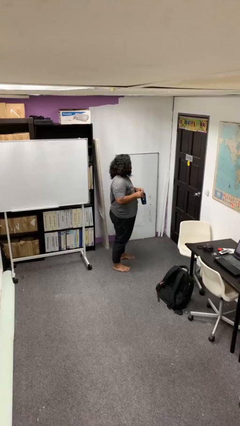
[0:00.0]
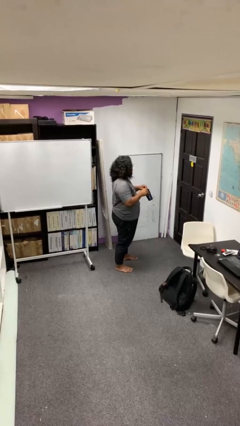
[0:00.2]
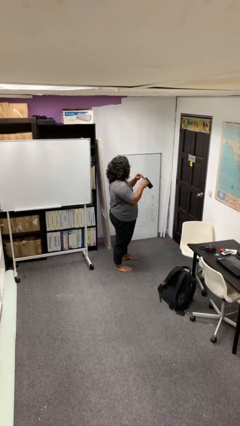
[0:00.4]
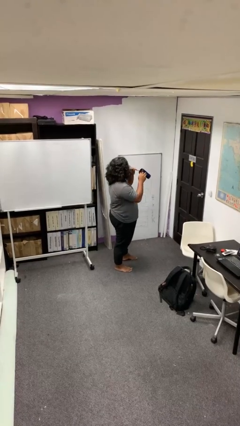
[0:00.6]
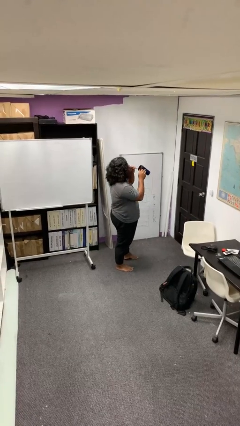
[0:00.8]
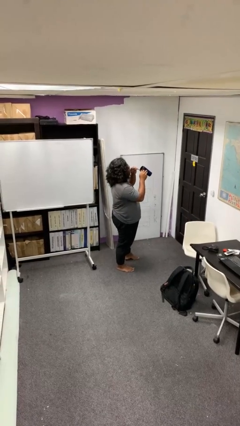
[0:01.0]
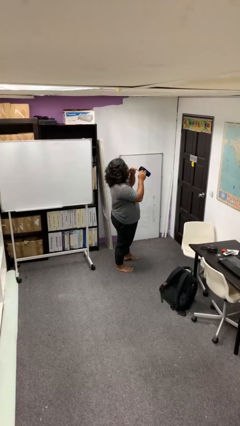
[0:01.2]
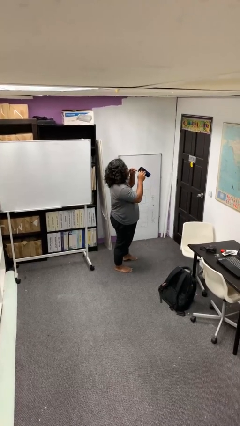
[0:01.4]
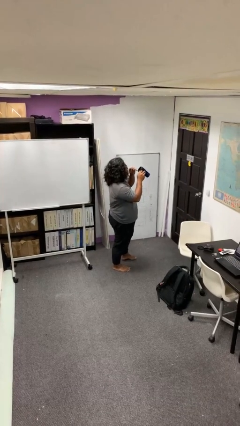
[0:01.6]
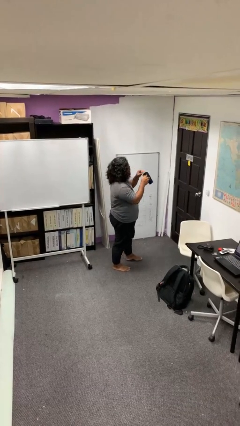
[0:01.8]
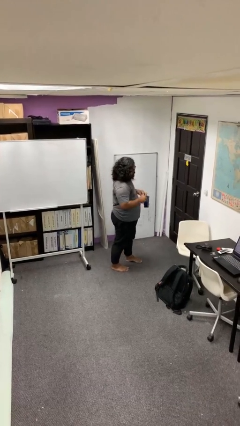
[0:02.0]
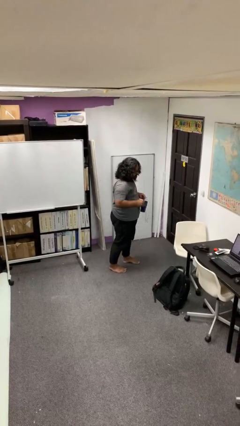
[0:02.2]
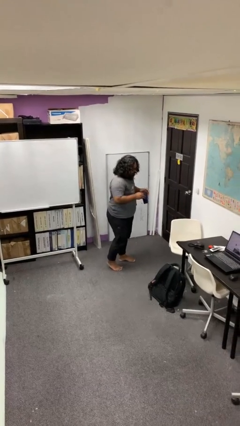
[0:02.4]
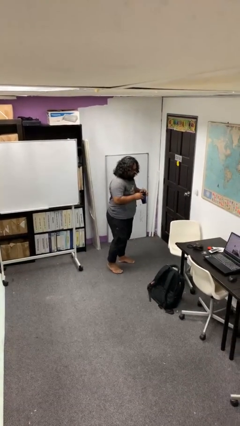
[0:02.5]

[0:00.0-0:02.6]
person drinks from straw

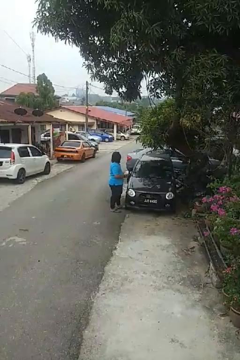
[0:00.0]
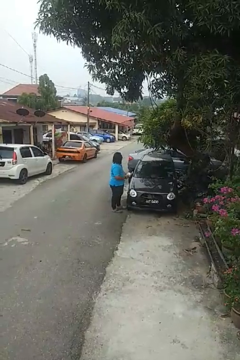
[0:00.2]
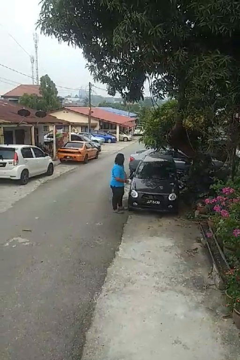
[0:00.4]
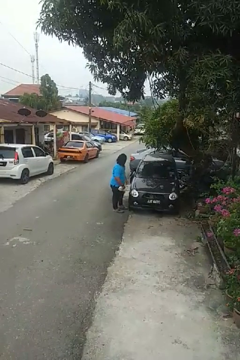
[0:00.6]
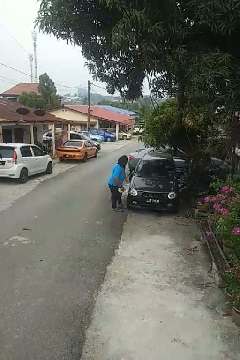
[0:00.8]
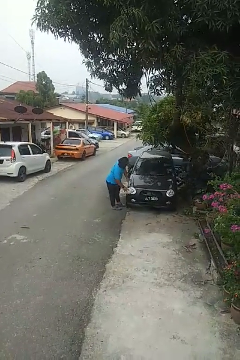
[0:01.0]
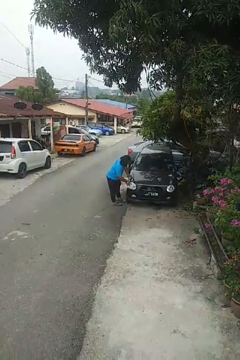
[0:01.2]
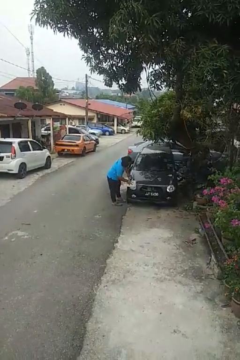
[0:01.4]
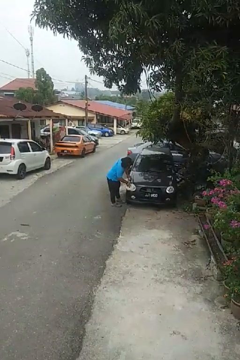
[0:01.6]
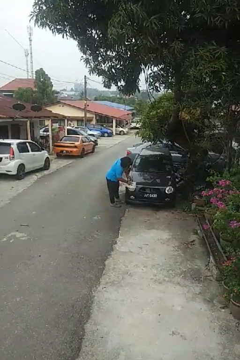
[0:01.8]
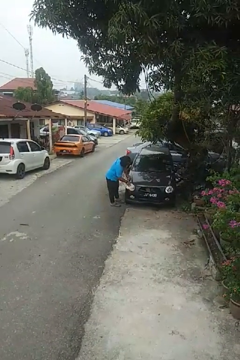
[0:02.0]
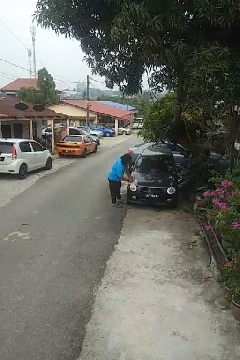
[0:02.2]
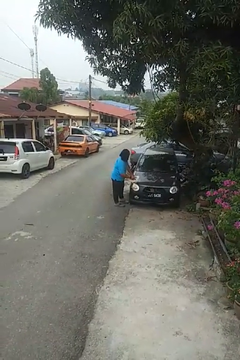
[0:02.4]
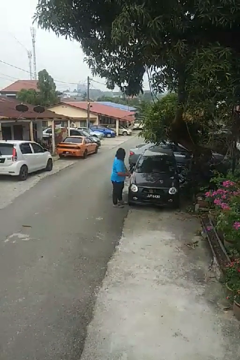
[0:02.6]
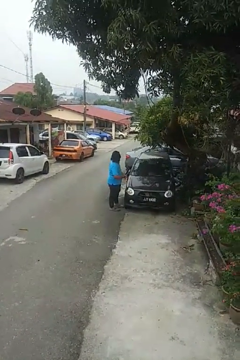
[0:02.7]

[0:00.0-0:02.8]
person polishes car with rag

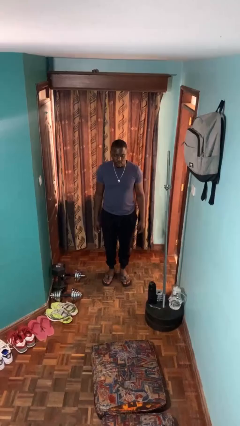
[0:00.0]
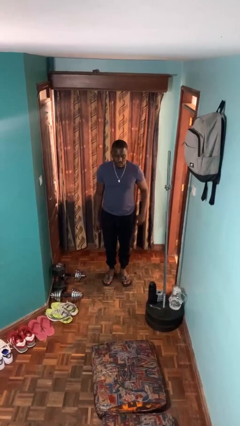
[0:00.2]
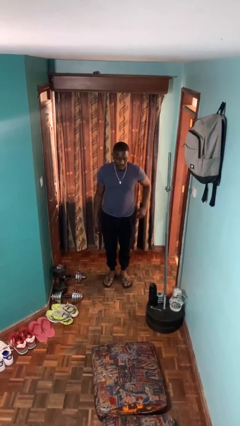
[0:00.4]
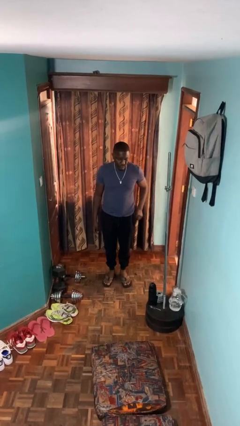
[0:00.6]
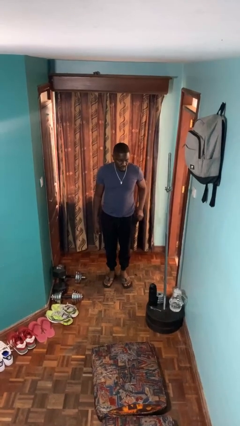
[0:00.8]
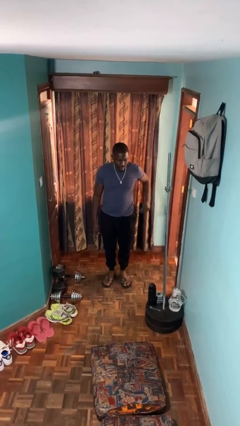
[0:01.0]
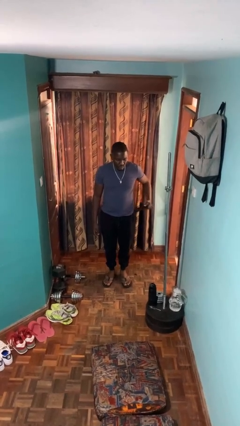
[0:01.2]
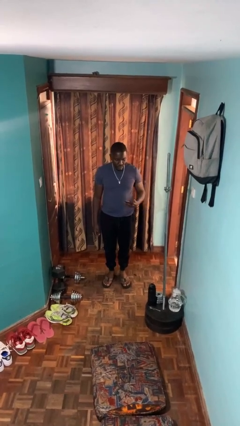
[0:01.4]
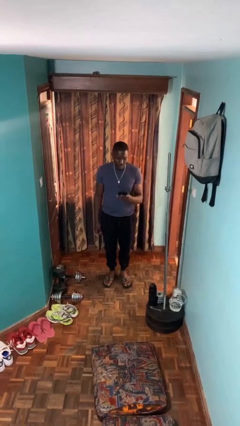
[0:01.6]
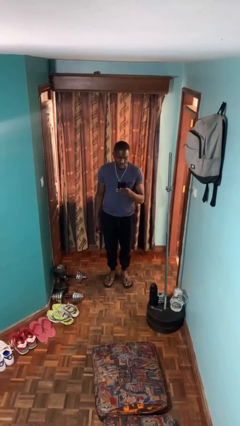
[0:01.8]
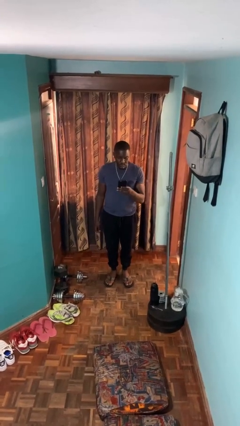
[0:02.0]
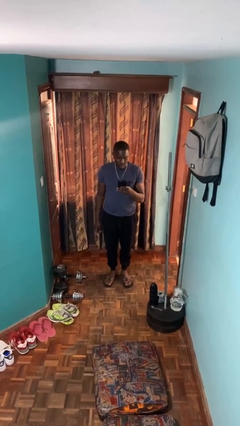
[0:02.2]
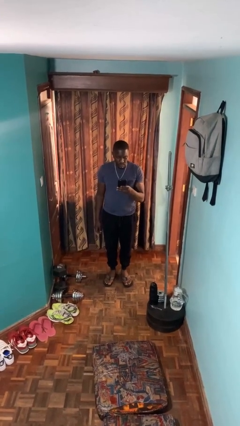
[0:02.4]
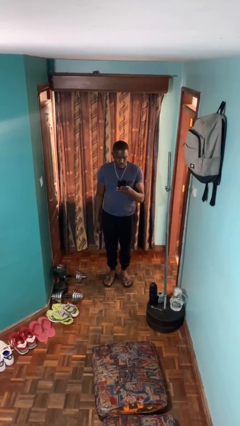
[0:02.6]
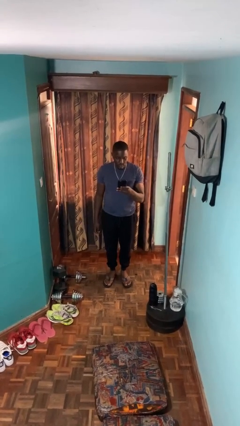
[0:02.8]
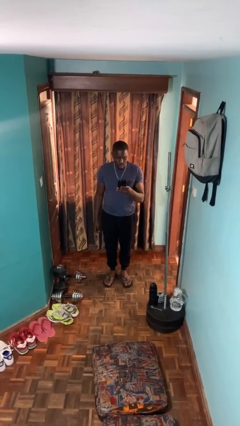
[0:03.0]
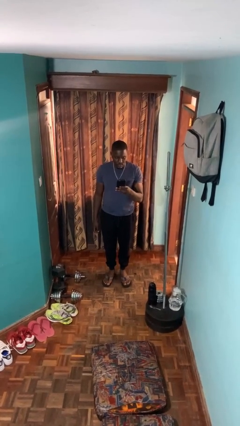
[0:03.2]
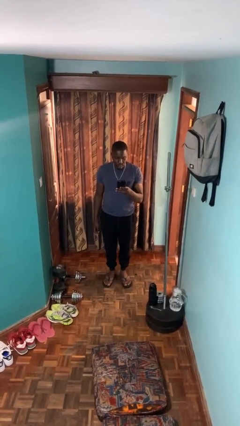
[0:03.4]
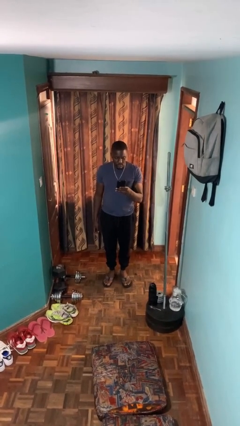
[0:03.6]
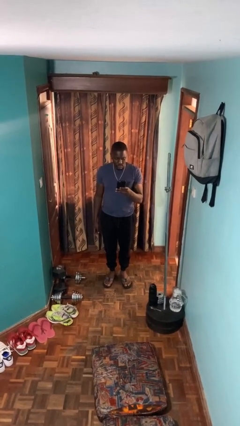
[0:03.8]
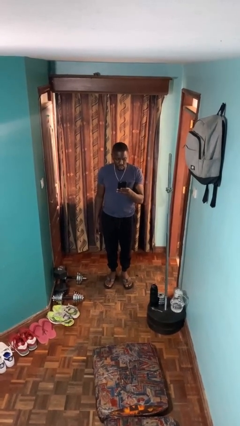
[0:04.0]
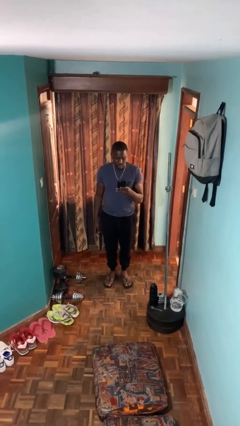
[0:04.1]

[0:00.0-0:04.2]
person takes phone from pocket

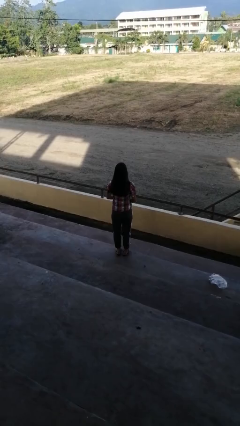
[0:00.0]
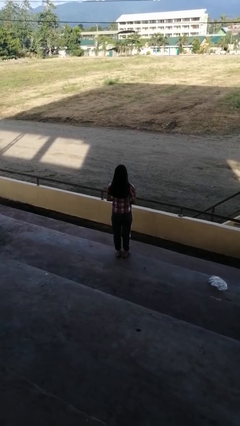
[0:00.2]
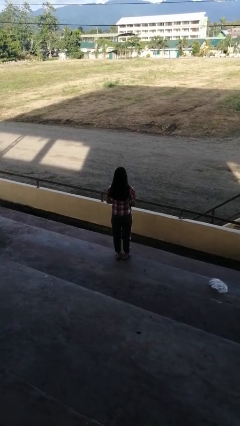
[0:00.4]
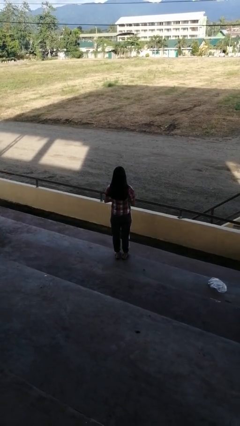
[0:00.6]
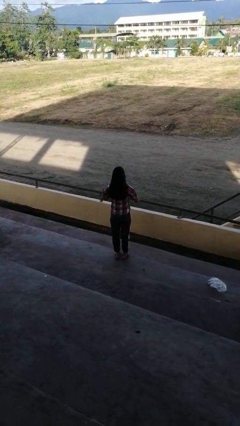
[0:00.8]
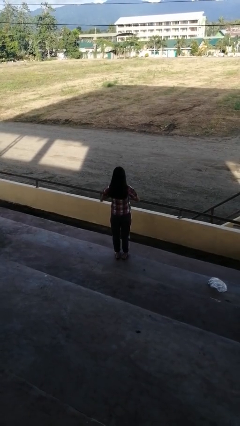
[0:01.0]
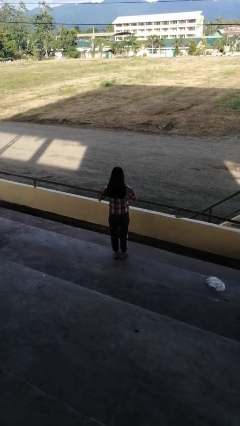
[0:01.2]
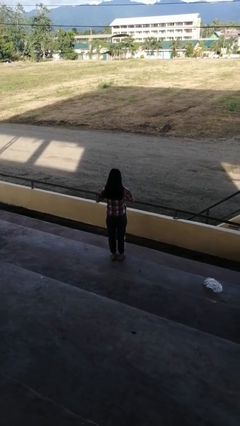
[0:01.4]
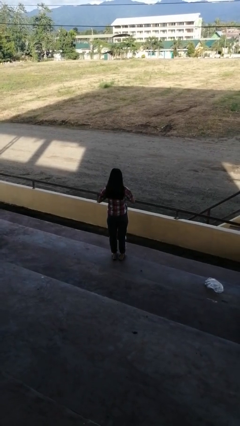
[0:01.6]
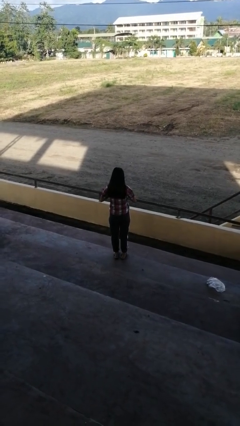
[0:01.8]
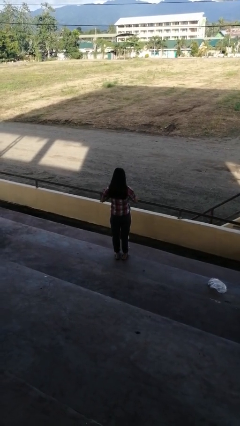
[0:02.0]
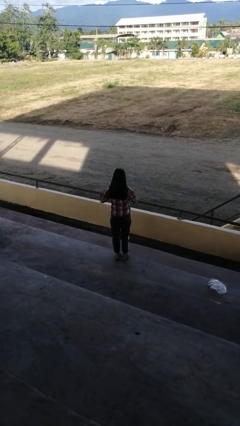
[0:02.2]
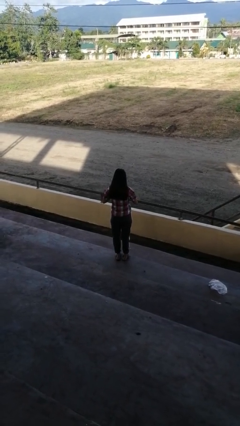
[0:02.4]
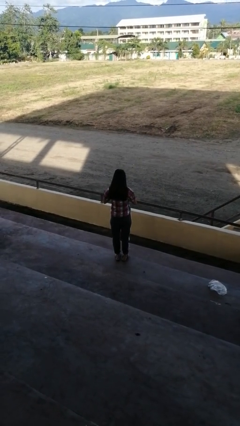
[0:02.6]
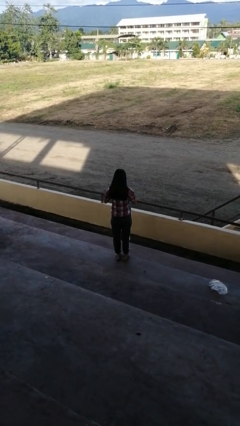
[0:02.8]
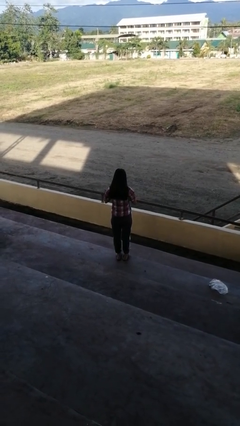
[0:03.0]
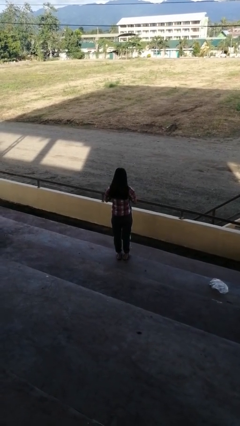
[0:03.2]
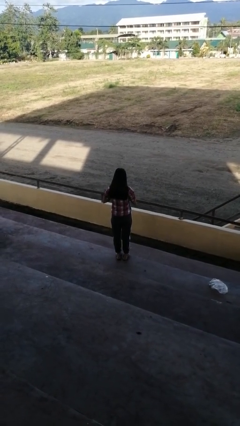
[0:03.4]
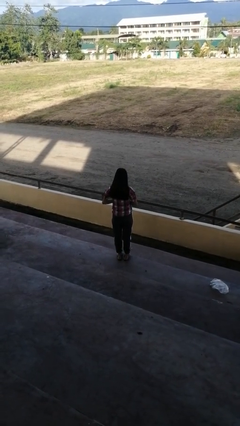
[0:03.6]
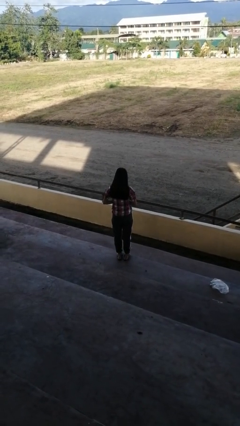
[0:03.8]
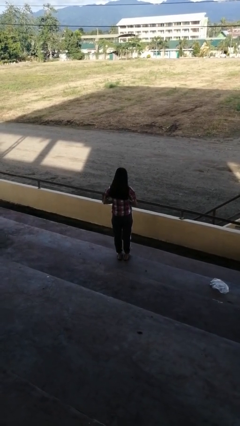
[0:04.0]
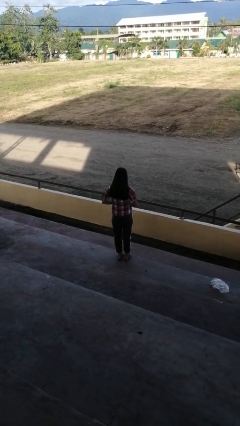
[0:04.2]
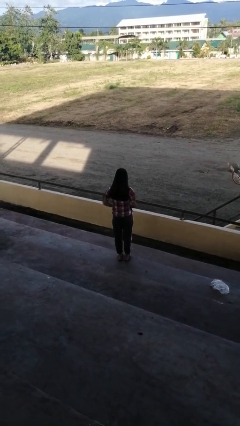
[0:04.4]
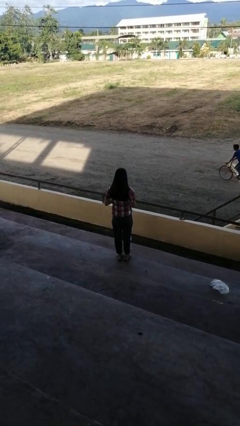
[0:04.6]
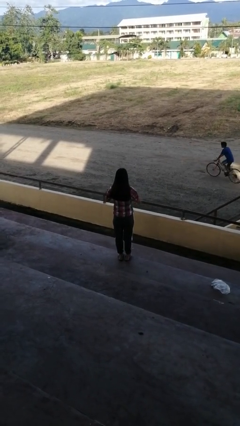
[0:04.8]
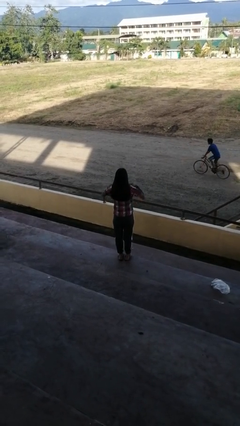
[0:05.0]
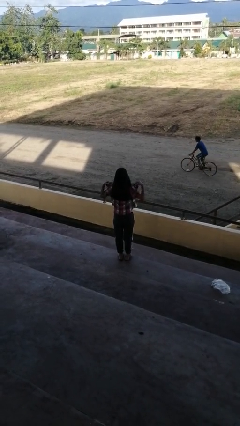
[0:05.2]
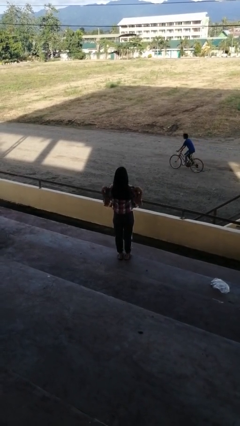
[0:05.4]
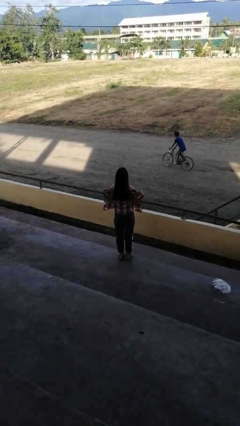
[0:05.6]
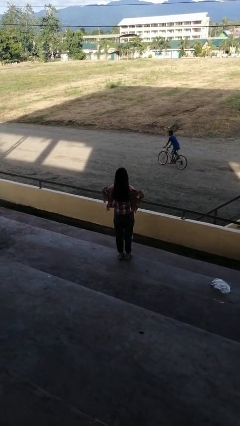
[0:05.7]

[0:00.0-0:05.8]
person unbuttons shirt

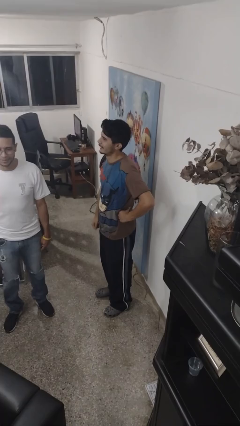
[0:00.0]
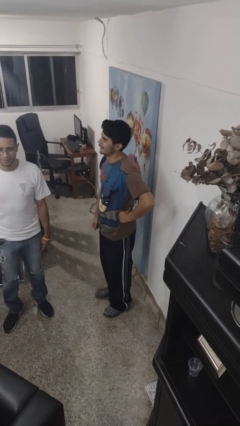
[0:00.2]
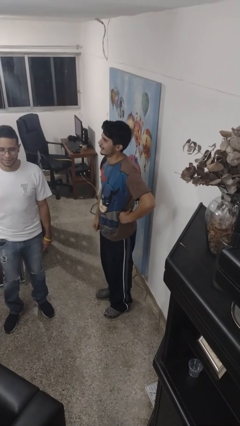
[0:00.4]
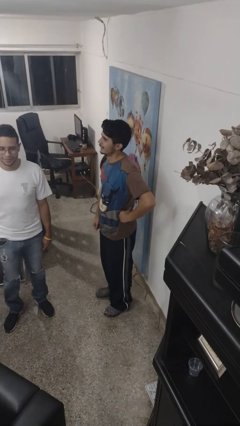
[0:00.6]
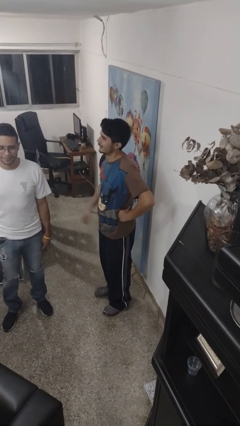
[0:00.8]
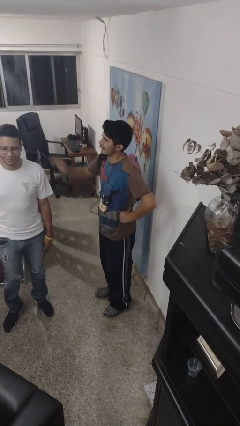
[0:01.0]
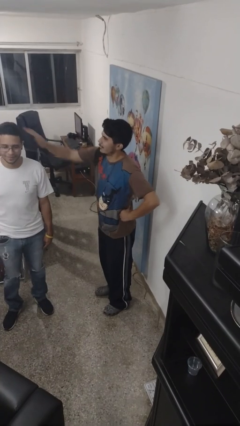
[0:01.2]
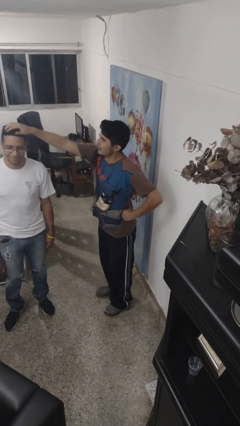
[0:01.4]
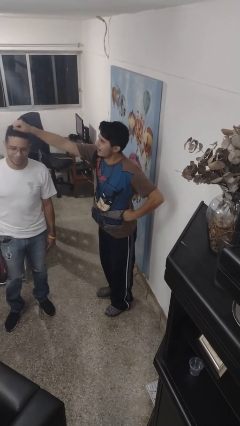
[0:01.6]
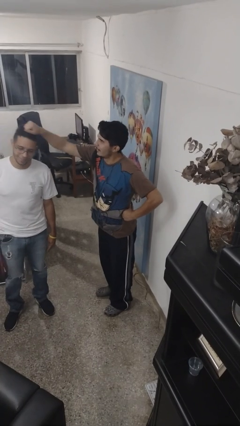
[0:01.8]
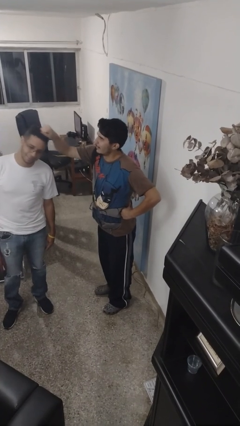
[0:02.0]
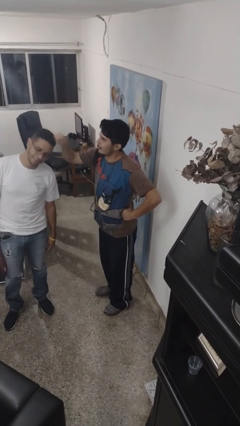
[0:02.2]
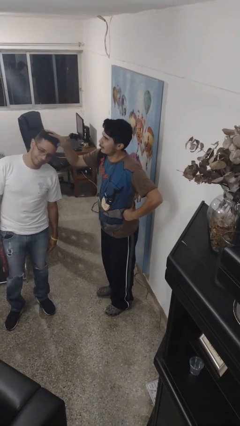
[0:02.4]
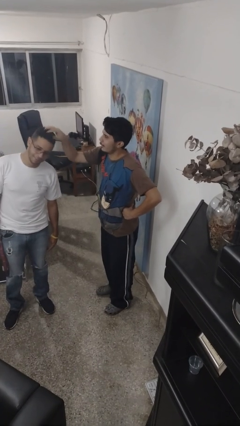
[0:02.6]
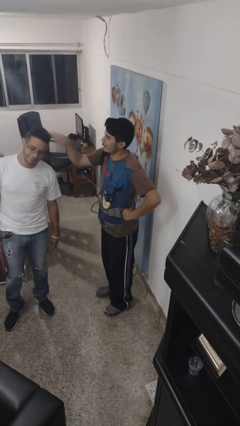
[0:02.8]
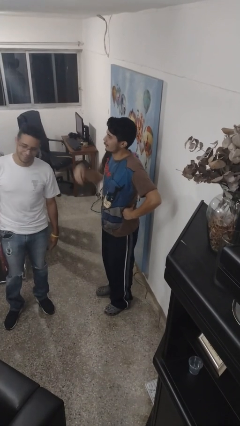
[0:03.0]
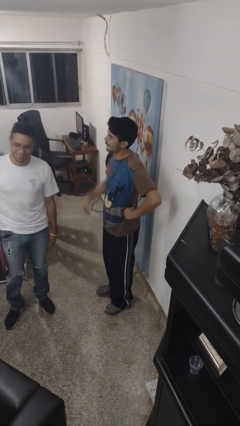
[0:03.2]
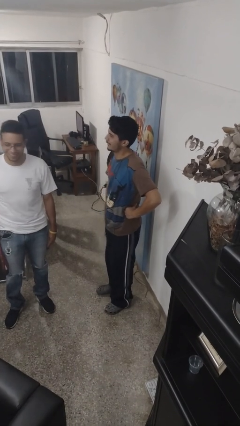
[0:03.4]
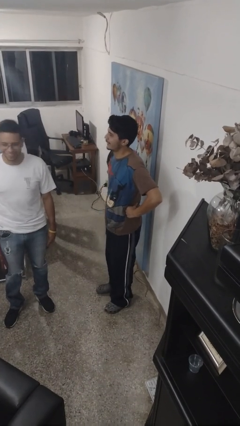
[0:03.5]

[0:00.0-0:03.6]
person grabs person by hair
